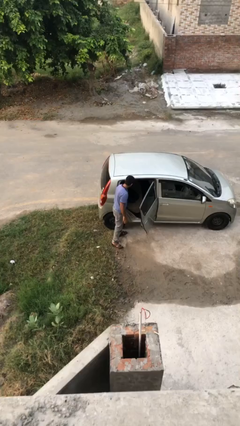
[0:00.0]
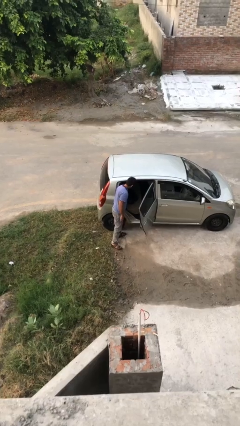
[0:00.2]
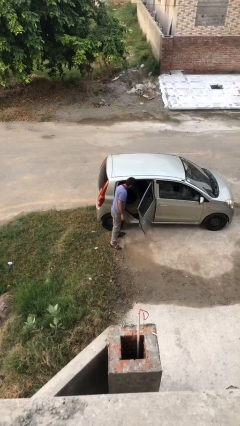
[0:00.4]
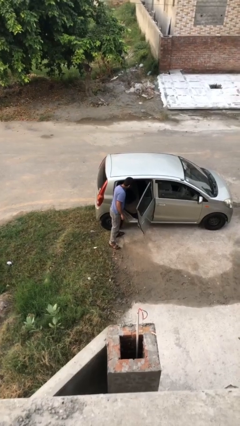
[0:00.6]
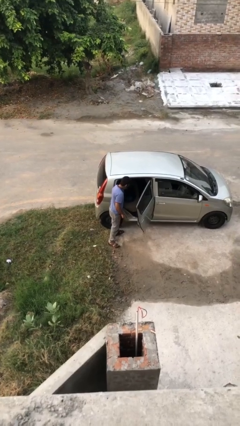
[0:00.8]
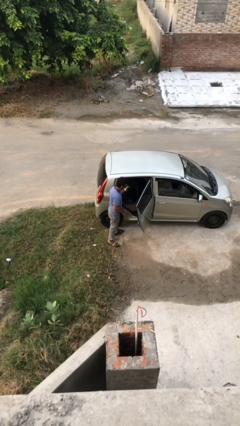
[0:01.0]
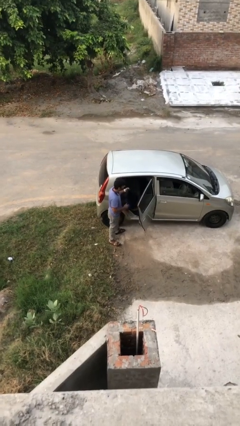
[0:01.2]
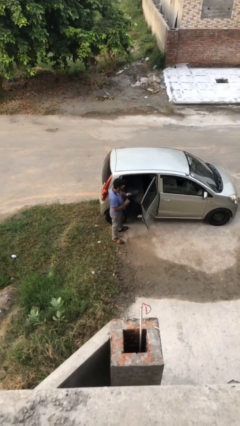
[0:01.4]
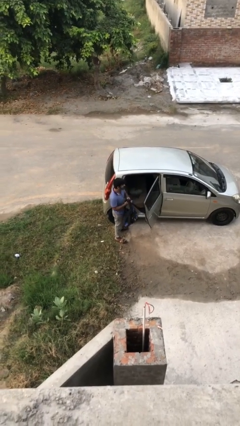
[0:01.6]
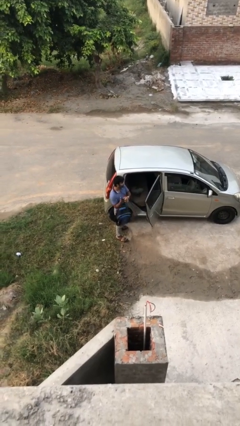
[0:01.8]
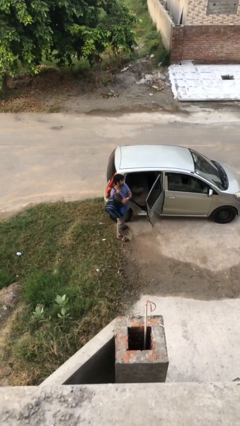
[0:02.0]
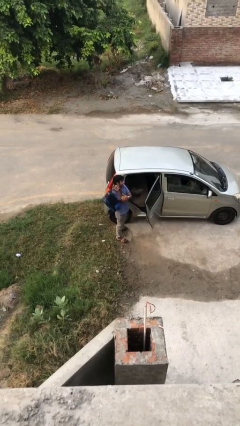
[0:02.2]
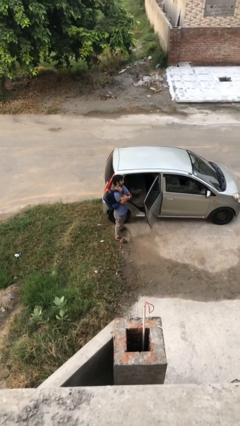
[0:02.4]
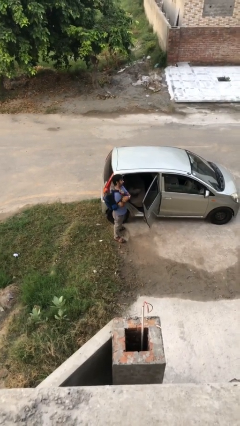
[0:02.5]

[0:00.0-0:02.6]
person unloads car

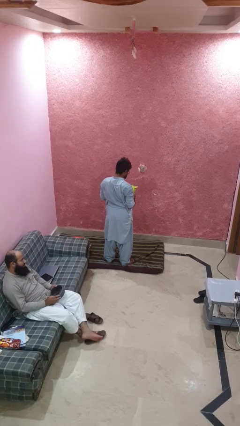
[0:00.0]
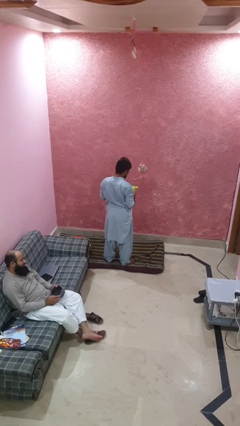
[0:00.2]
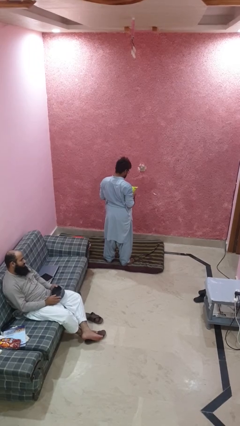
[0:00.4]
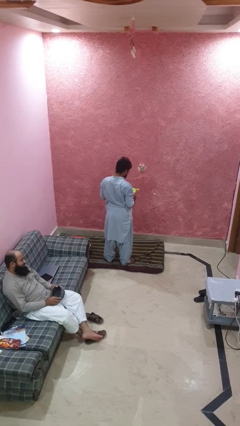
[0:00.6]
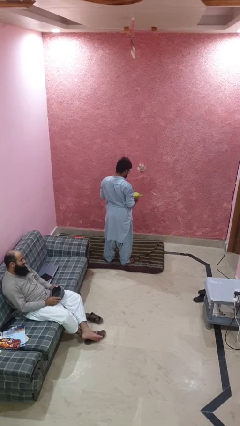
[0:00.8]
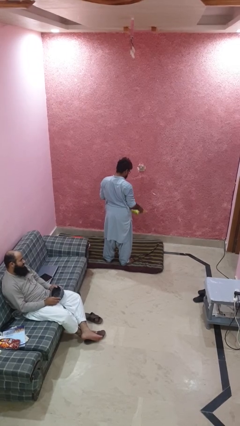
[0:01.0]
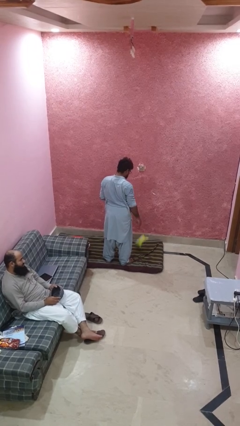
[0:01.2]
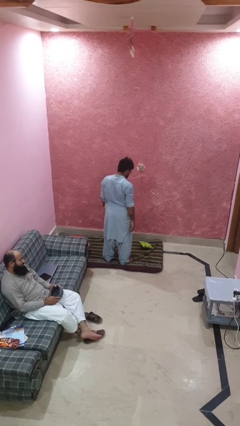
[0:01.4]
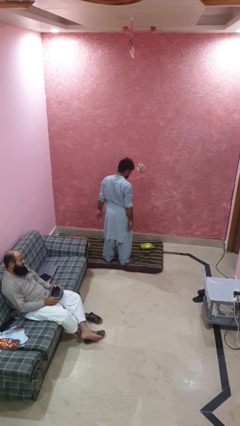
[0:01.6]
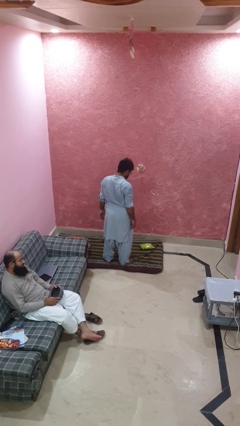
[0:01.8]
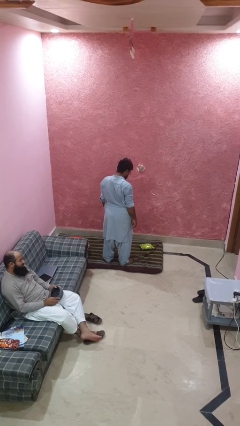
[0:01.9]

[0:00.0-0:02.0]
person drops object

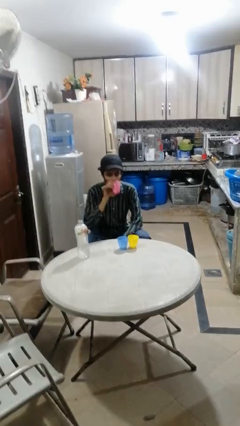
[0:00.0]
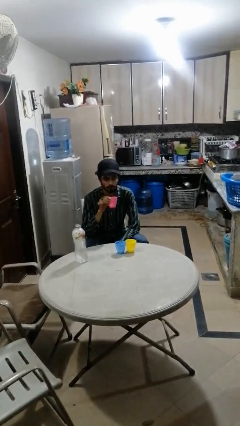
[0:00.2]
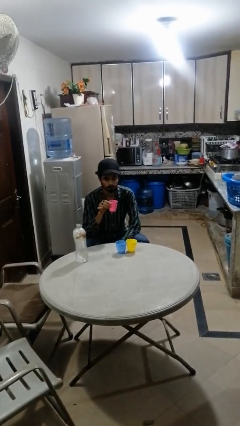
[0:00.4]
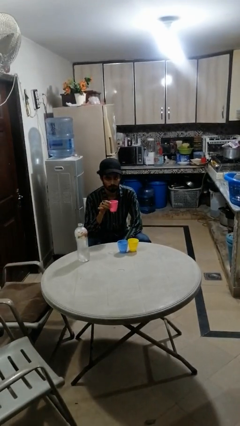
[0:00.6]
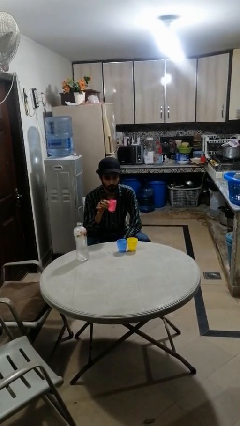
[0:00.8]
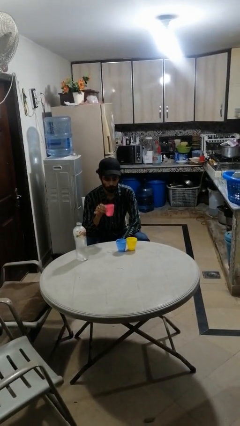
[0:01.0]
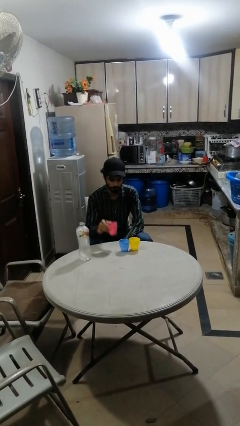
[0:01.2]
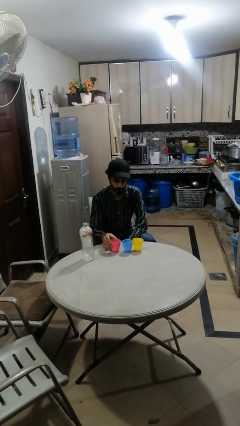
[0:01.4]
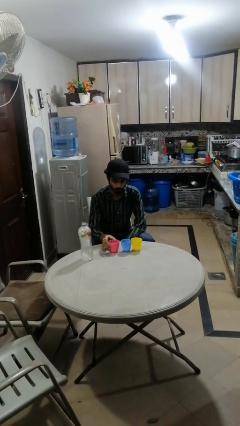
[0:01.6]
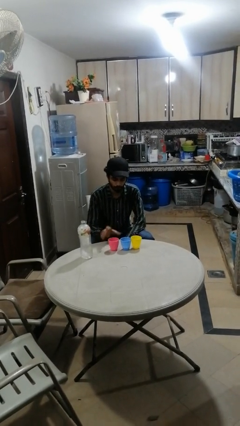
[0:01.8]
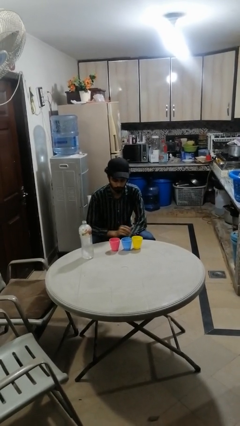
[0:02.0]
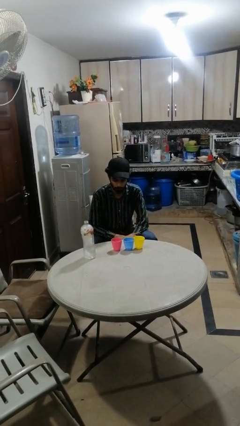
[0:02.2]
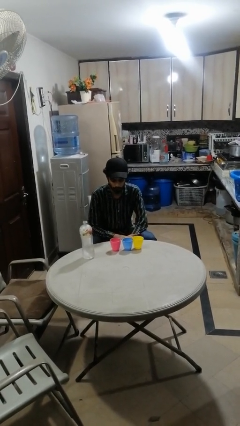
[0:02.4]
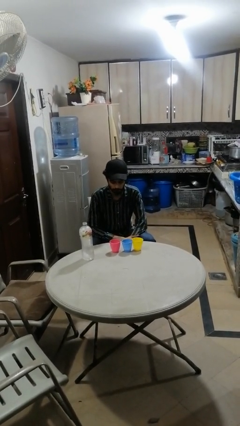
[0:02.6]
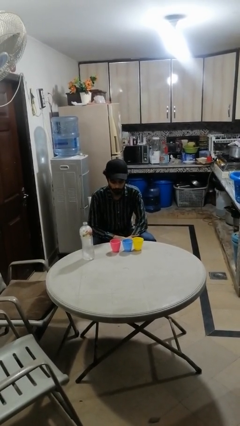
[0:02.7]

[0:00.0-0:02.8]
person puts down object on table

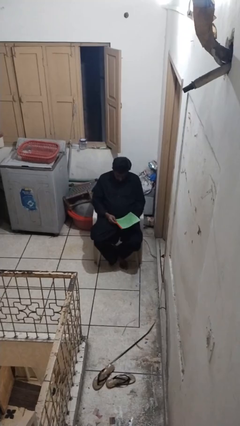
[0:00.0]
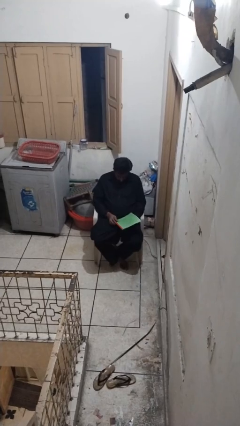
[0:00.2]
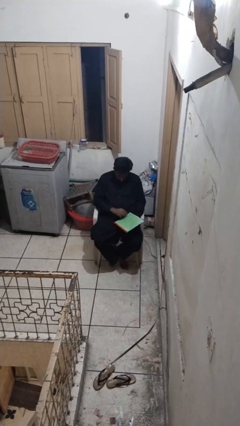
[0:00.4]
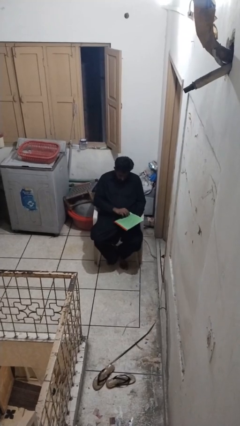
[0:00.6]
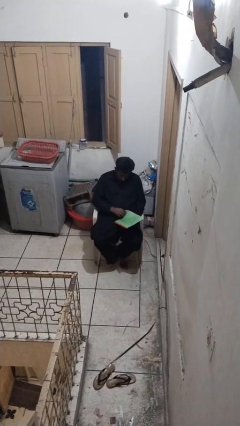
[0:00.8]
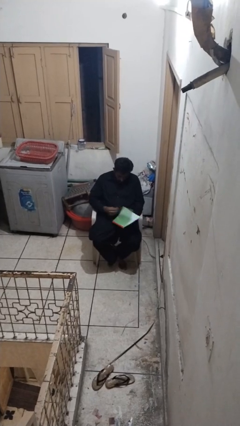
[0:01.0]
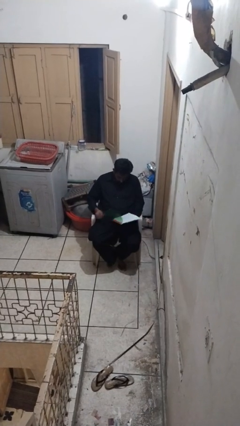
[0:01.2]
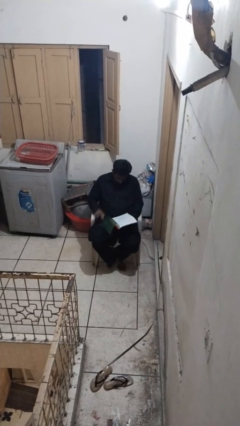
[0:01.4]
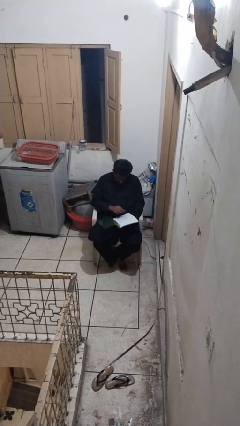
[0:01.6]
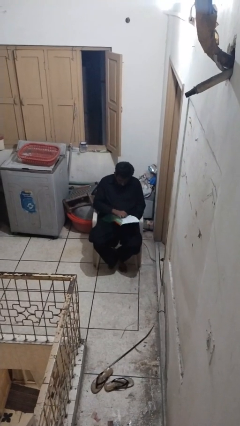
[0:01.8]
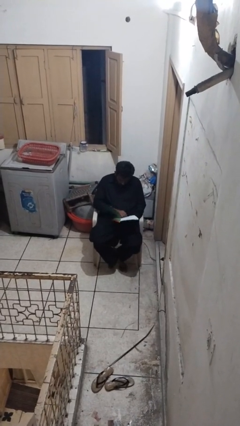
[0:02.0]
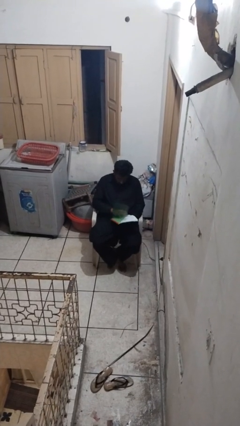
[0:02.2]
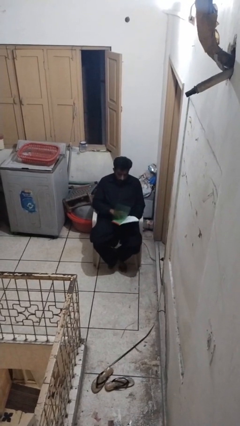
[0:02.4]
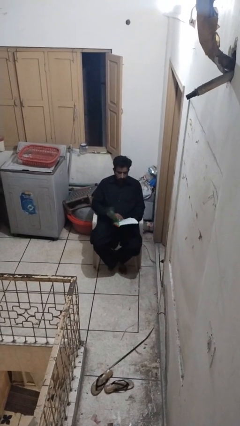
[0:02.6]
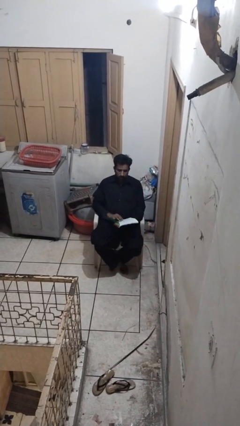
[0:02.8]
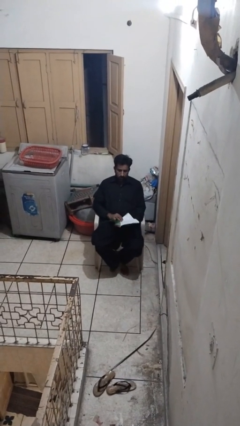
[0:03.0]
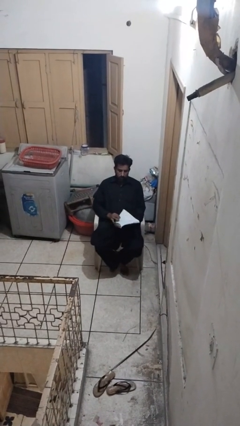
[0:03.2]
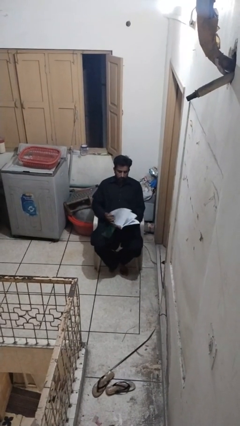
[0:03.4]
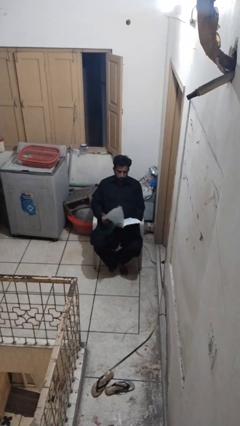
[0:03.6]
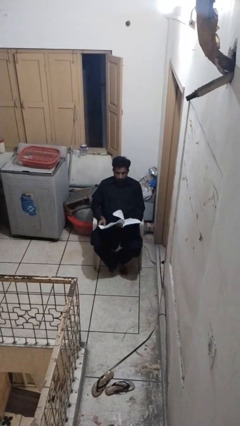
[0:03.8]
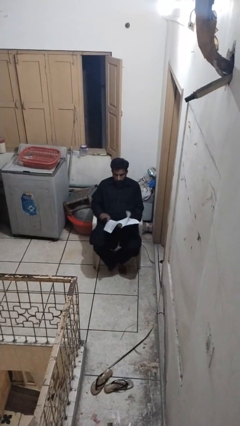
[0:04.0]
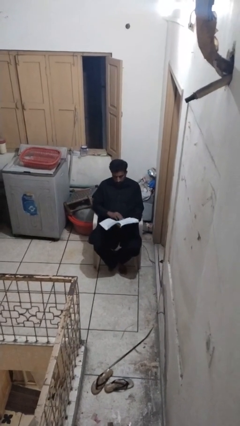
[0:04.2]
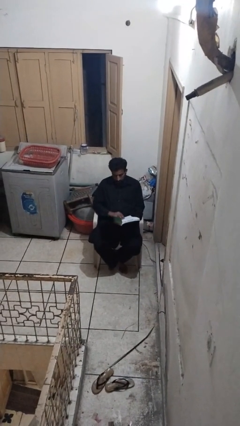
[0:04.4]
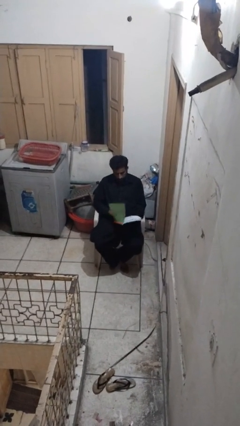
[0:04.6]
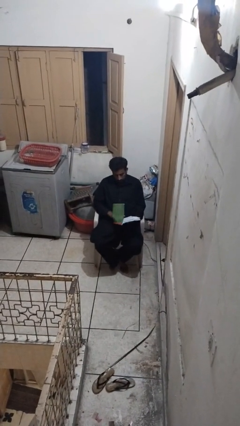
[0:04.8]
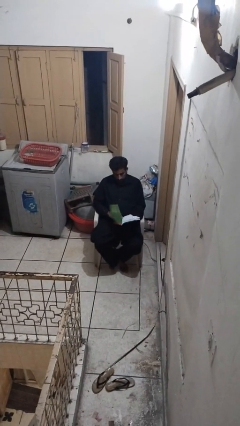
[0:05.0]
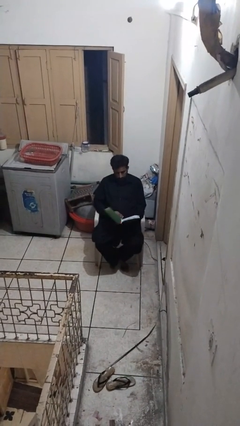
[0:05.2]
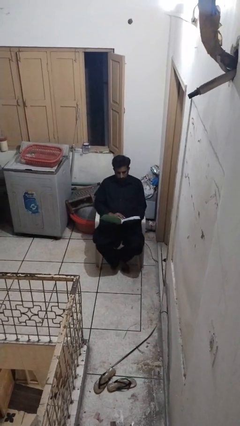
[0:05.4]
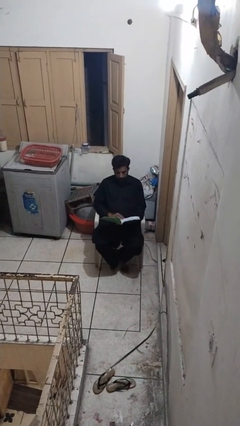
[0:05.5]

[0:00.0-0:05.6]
person reads magazine

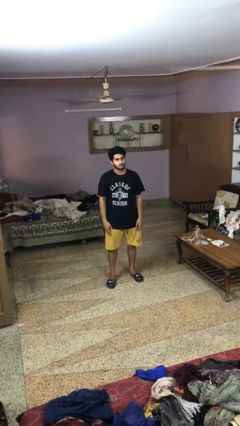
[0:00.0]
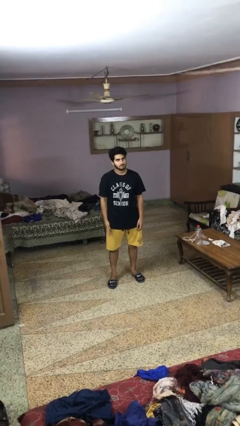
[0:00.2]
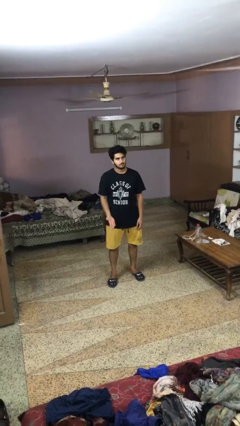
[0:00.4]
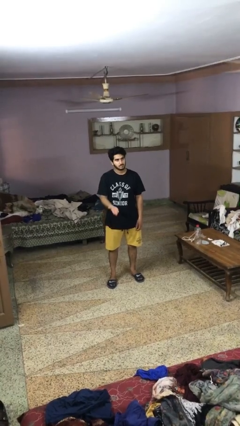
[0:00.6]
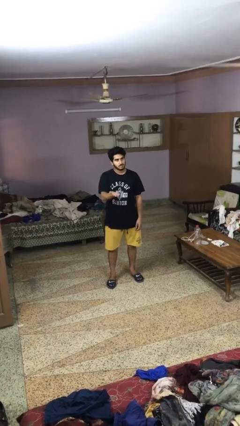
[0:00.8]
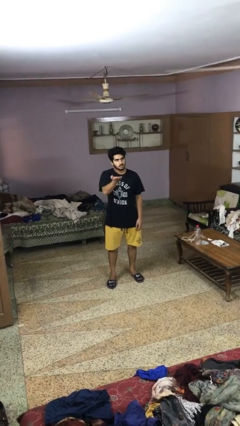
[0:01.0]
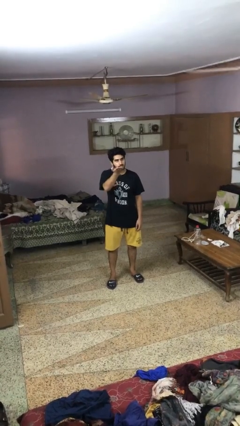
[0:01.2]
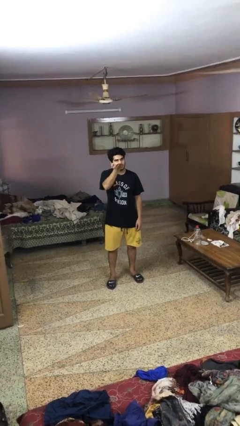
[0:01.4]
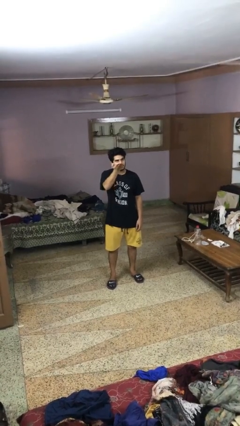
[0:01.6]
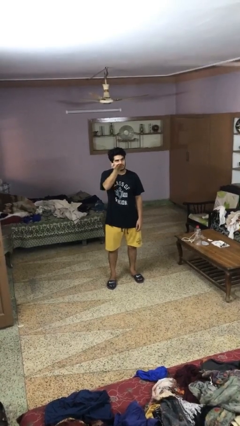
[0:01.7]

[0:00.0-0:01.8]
person gestures swipe up

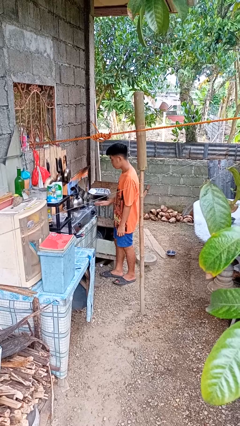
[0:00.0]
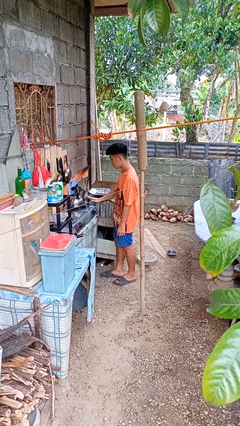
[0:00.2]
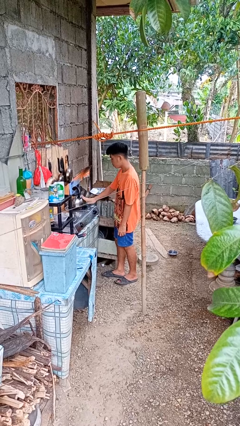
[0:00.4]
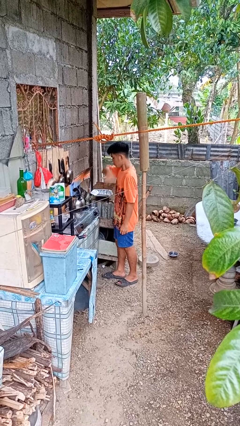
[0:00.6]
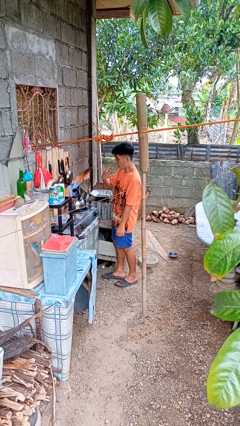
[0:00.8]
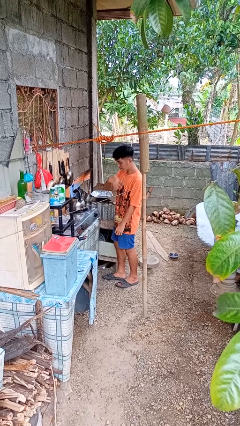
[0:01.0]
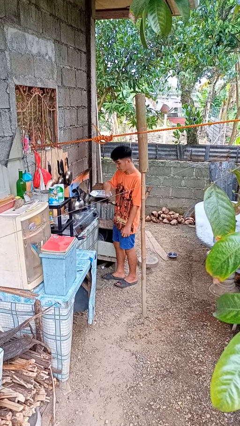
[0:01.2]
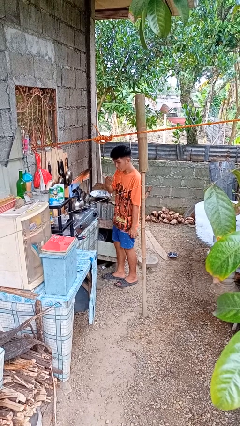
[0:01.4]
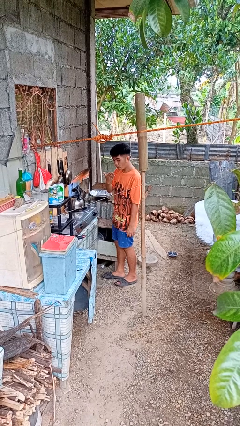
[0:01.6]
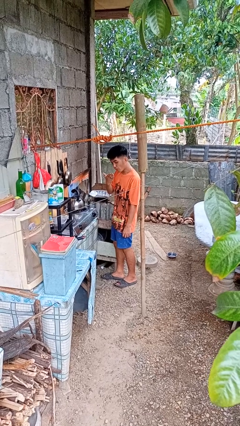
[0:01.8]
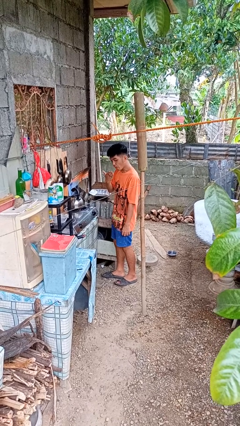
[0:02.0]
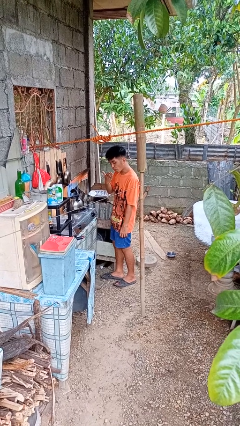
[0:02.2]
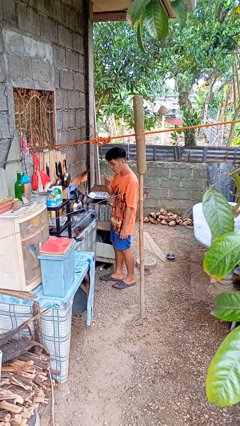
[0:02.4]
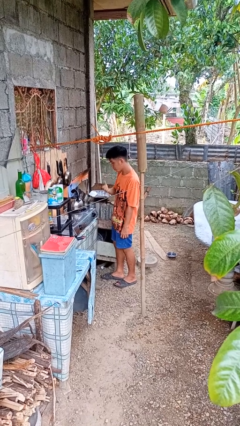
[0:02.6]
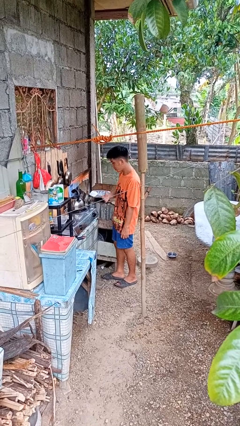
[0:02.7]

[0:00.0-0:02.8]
person burns hand
